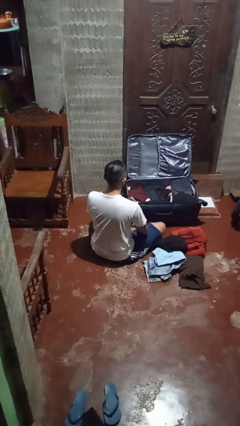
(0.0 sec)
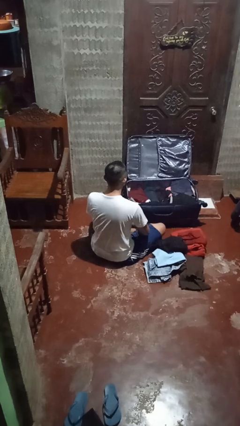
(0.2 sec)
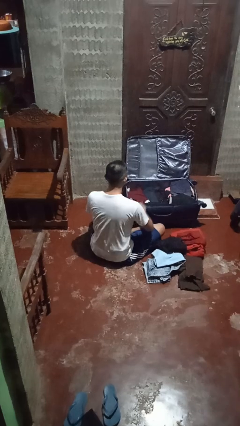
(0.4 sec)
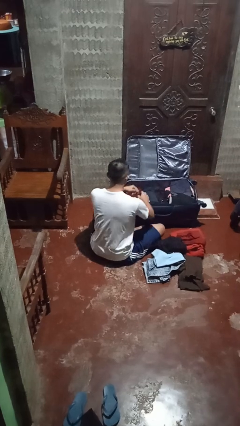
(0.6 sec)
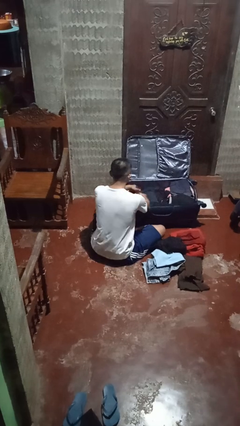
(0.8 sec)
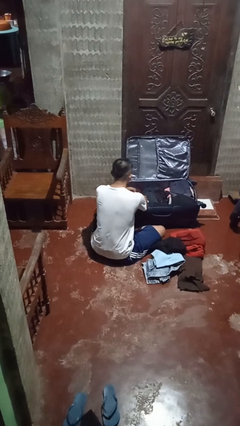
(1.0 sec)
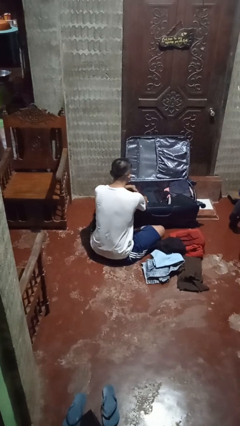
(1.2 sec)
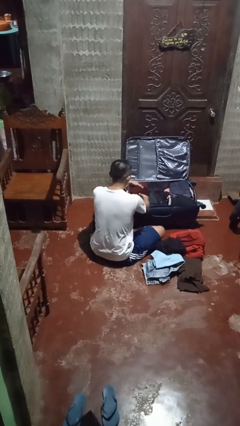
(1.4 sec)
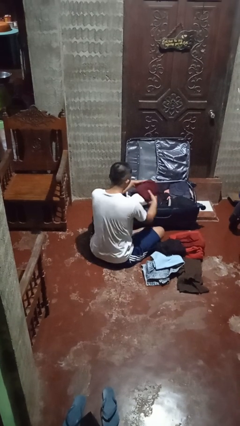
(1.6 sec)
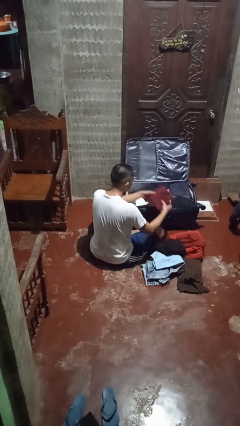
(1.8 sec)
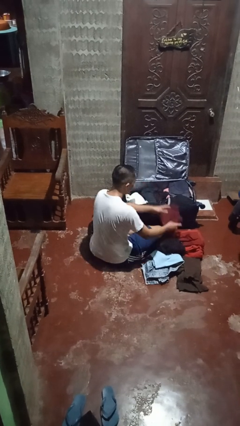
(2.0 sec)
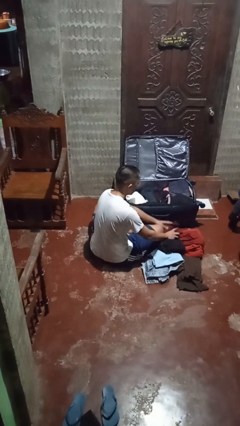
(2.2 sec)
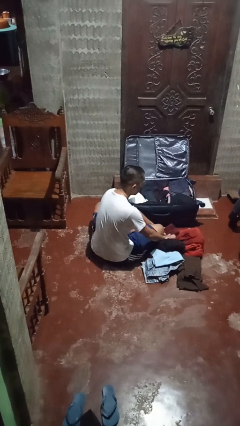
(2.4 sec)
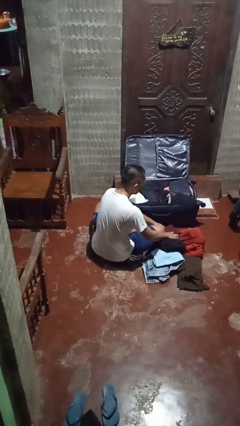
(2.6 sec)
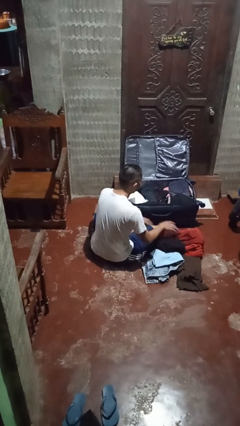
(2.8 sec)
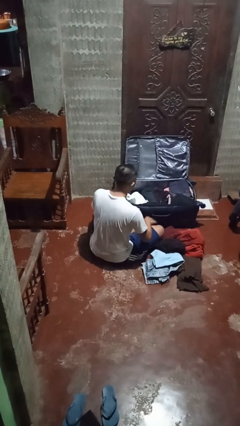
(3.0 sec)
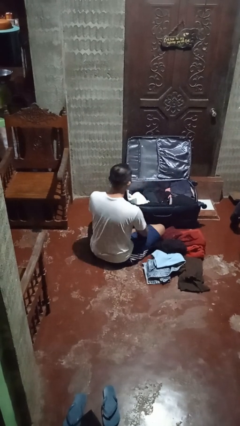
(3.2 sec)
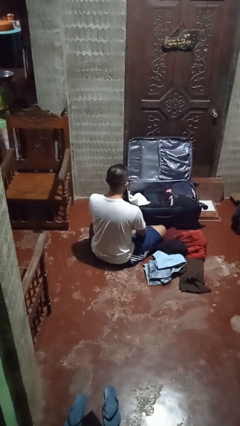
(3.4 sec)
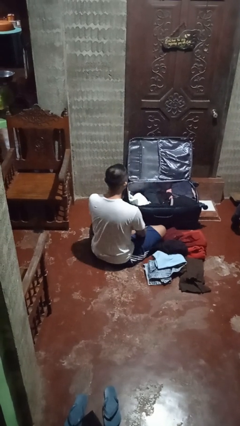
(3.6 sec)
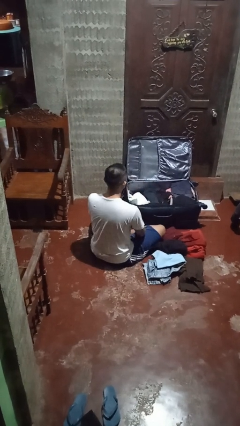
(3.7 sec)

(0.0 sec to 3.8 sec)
person unloads clothes from suitcase

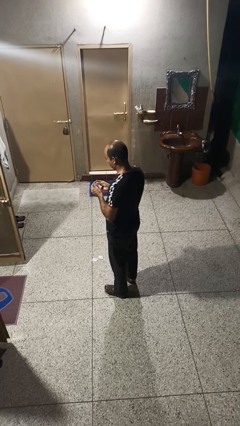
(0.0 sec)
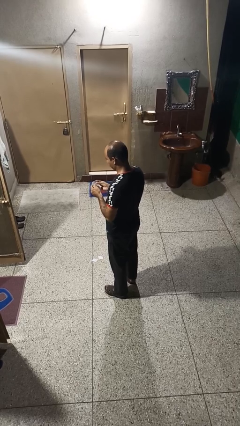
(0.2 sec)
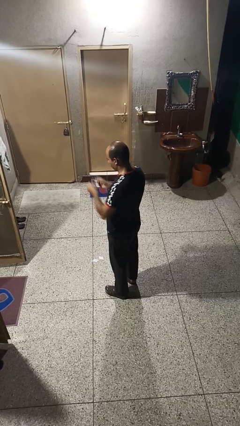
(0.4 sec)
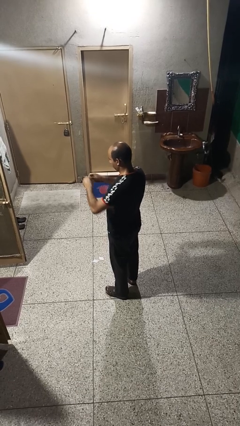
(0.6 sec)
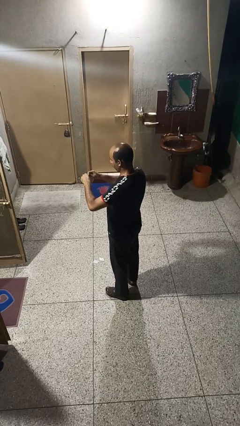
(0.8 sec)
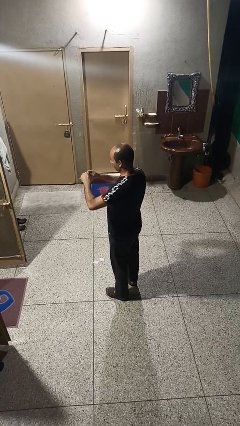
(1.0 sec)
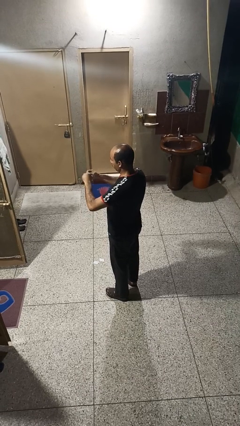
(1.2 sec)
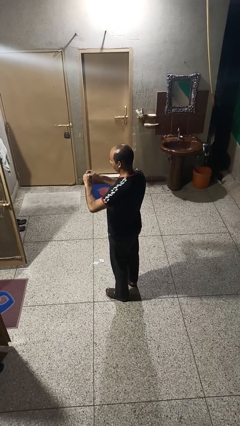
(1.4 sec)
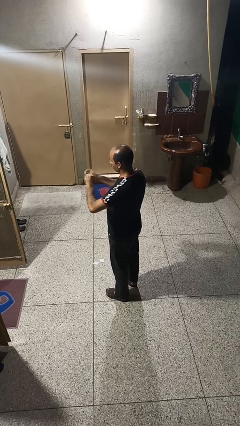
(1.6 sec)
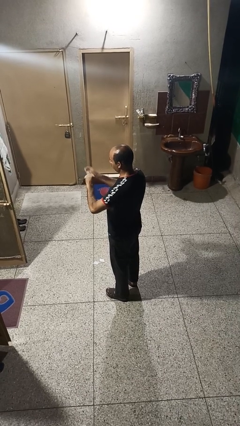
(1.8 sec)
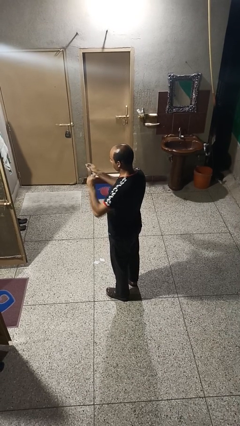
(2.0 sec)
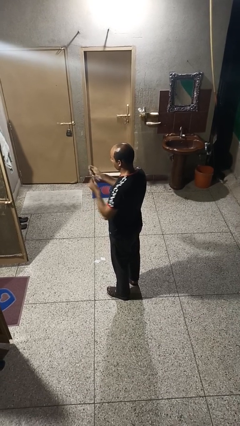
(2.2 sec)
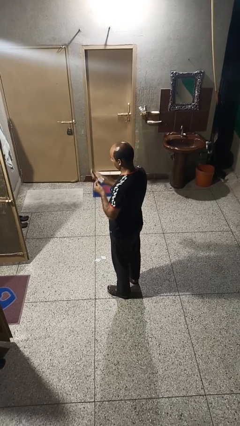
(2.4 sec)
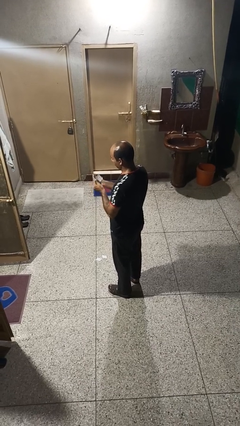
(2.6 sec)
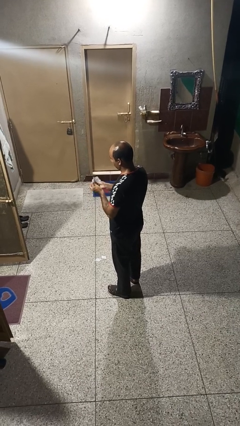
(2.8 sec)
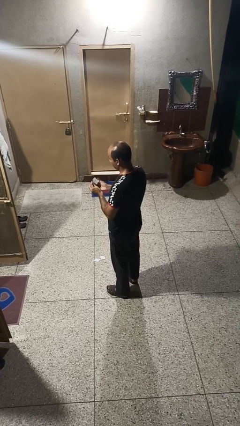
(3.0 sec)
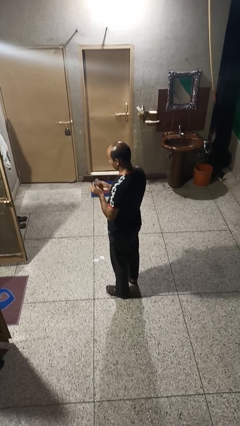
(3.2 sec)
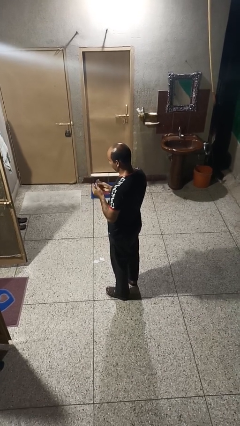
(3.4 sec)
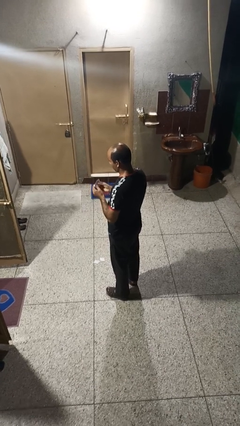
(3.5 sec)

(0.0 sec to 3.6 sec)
person tears paper

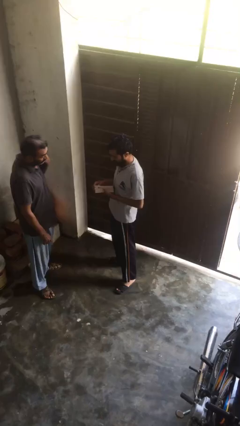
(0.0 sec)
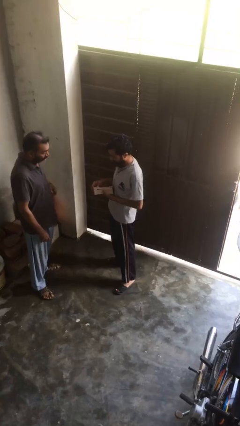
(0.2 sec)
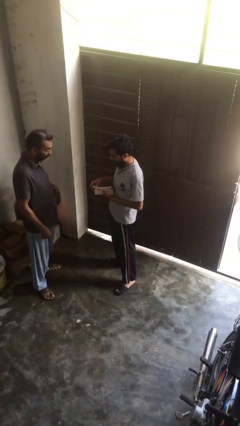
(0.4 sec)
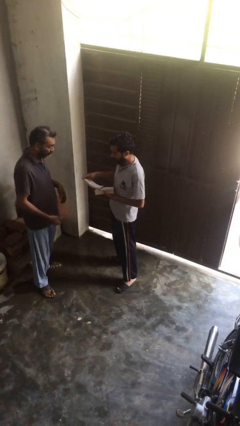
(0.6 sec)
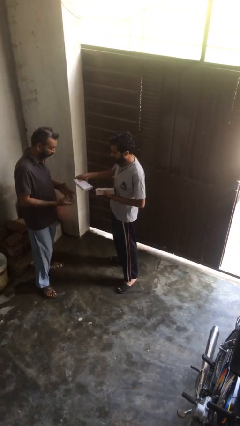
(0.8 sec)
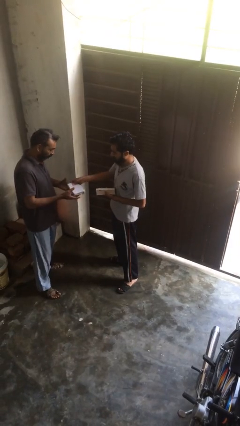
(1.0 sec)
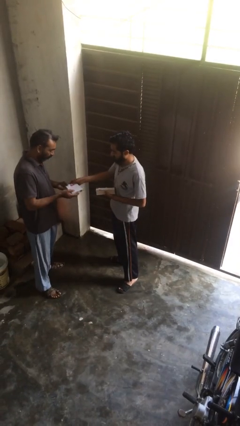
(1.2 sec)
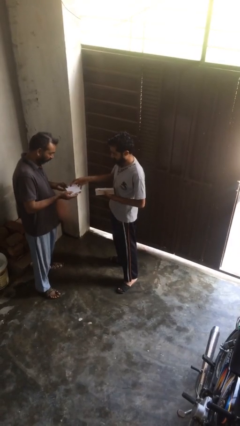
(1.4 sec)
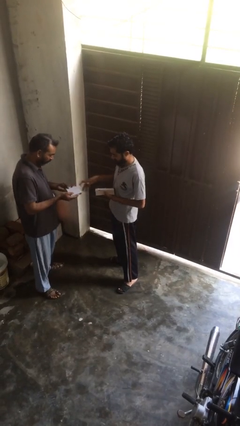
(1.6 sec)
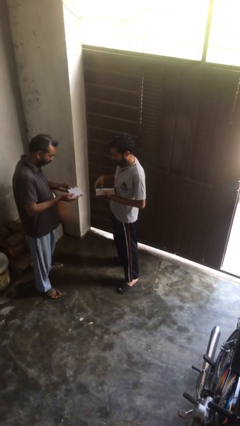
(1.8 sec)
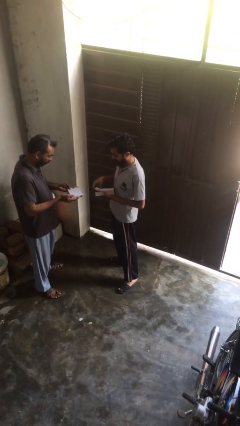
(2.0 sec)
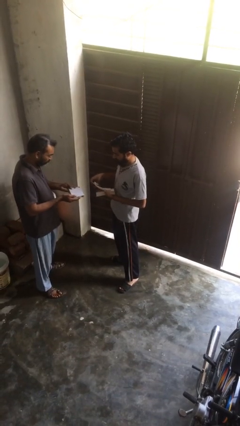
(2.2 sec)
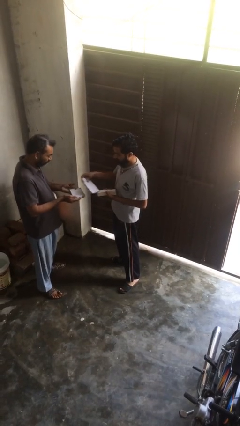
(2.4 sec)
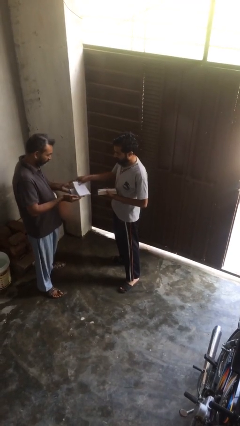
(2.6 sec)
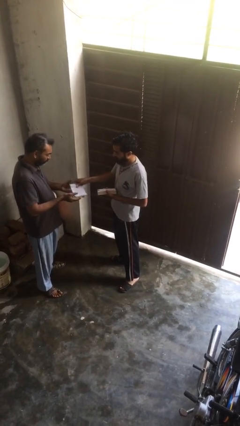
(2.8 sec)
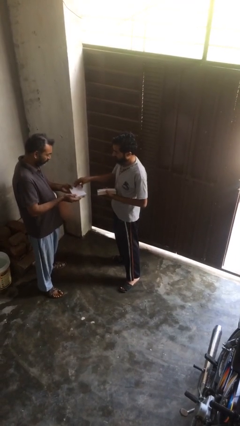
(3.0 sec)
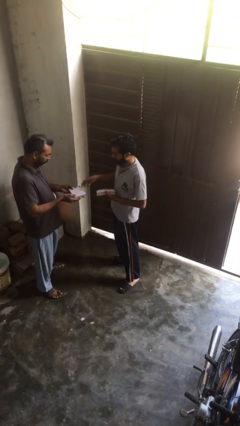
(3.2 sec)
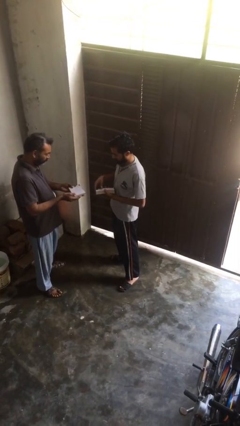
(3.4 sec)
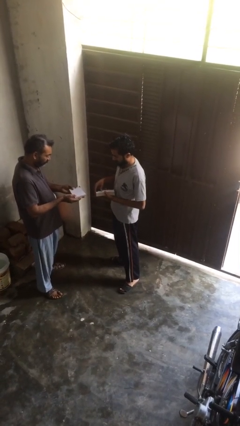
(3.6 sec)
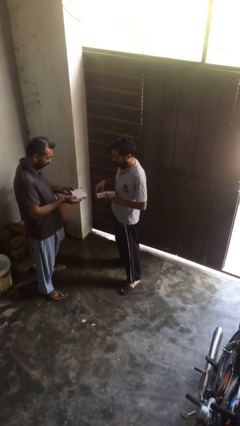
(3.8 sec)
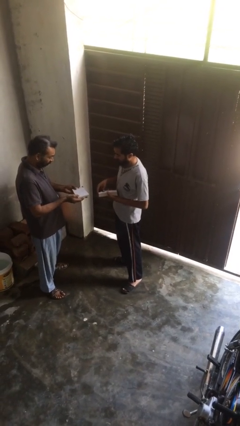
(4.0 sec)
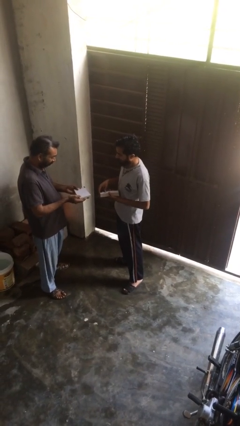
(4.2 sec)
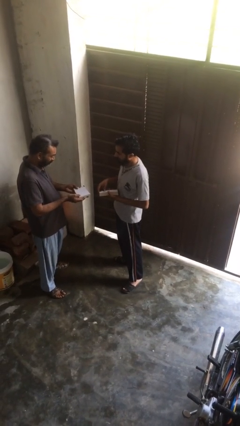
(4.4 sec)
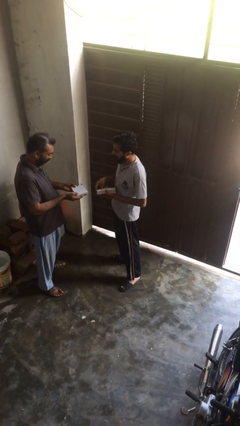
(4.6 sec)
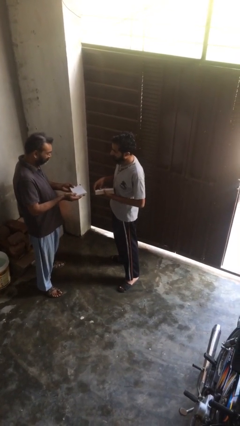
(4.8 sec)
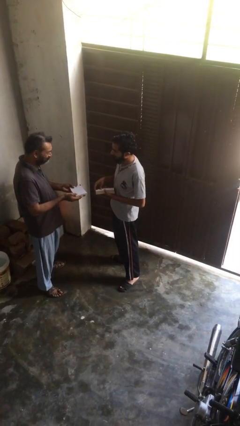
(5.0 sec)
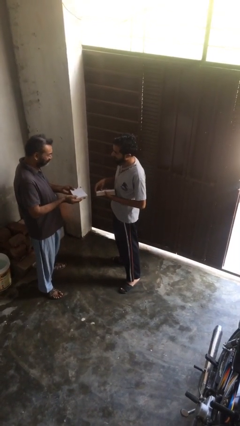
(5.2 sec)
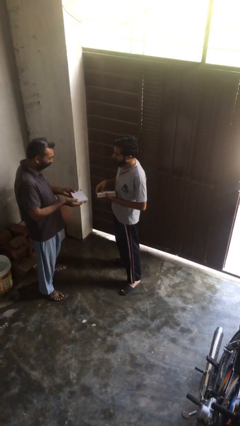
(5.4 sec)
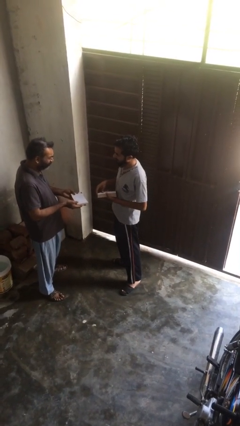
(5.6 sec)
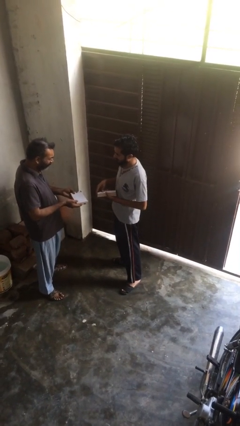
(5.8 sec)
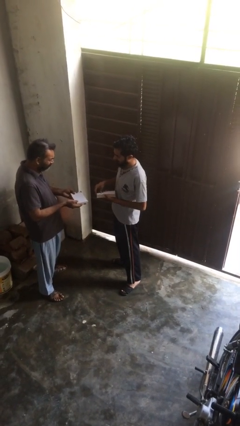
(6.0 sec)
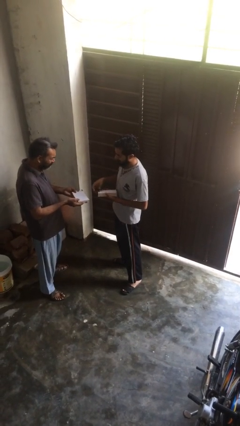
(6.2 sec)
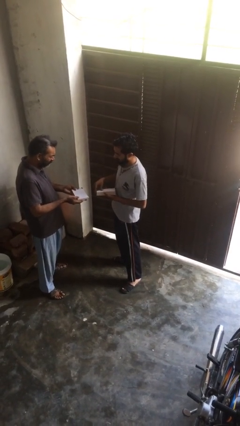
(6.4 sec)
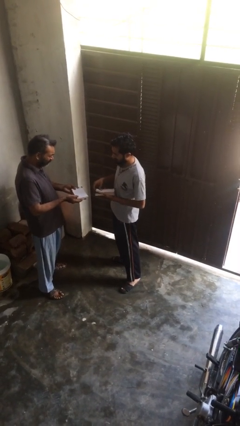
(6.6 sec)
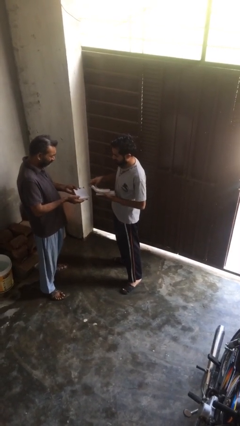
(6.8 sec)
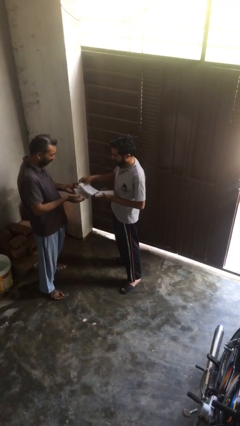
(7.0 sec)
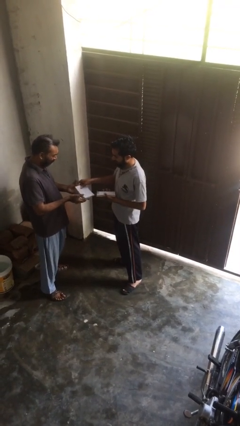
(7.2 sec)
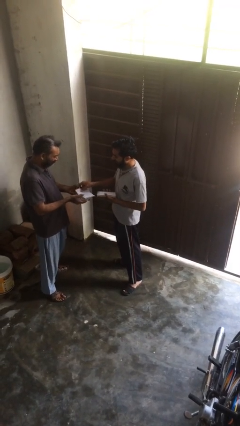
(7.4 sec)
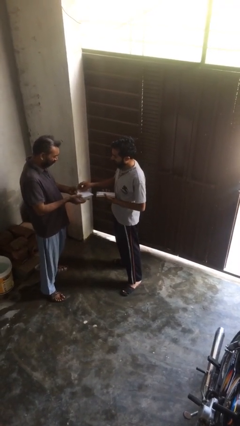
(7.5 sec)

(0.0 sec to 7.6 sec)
person transfers object to person

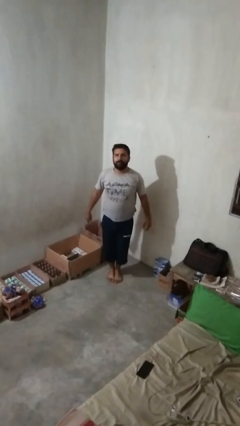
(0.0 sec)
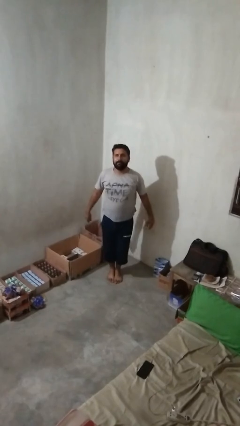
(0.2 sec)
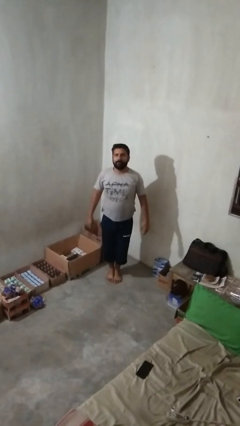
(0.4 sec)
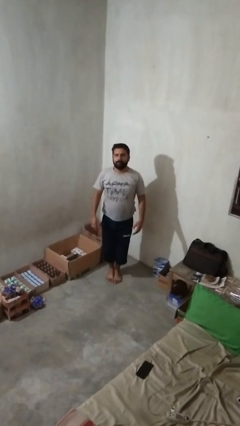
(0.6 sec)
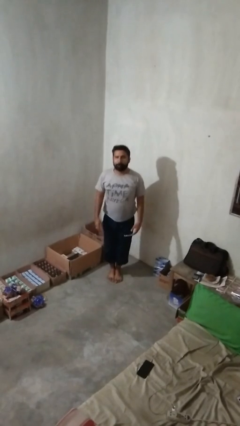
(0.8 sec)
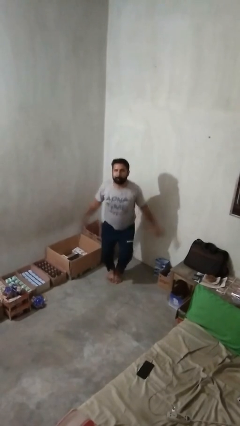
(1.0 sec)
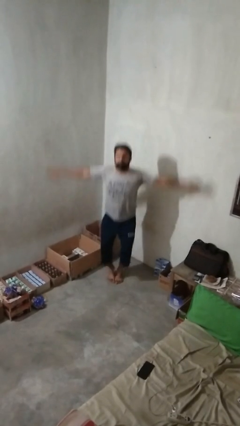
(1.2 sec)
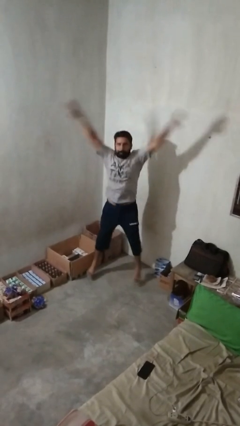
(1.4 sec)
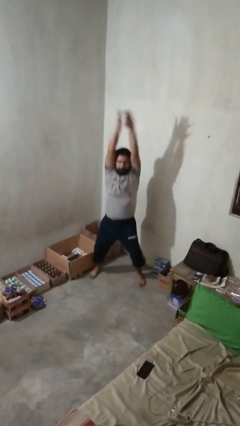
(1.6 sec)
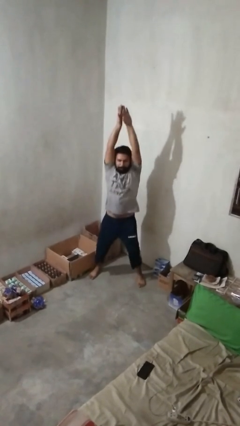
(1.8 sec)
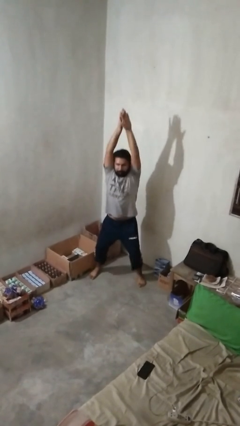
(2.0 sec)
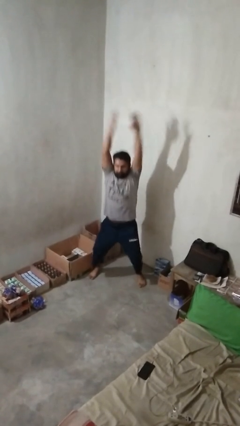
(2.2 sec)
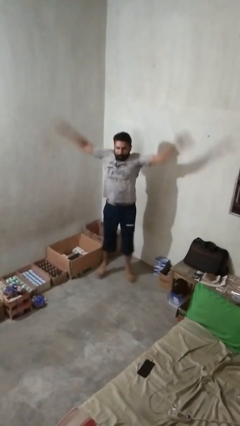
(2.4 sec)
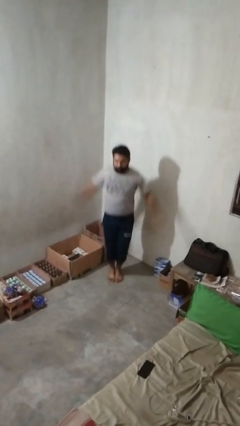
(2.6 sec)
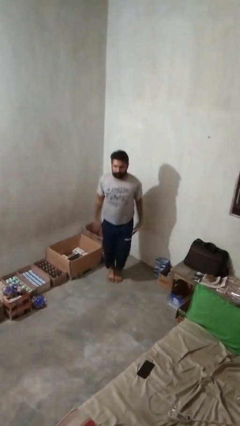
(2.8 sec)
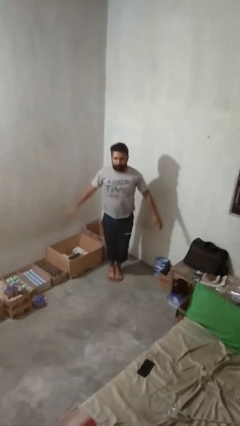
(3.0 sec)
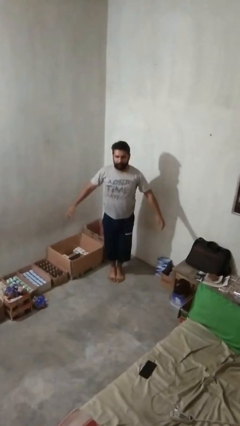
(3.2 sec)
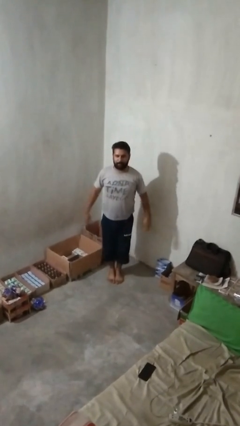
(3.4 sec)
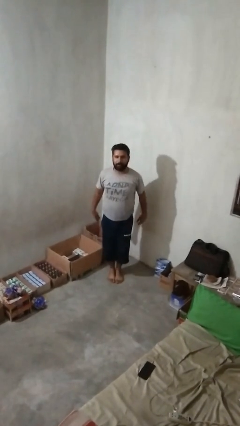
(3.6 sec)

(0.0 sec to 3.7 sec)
person exercises with jumping jacks
